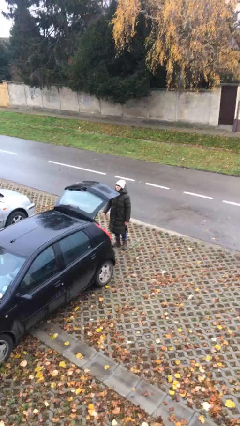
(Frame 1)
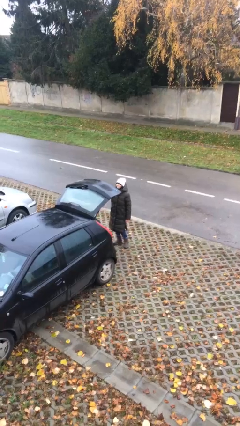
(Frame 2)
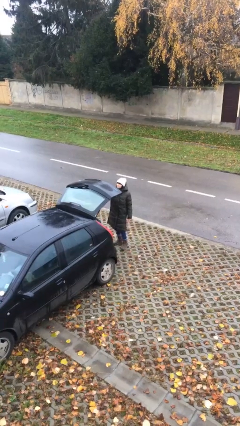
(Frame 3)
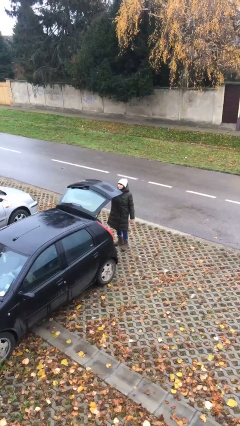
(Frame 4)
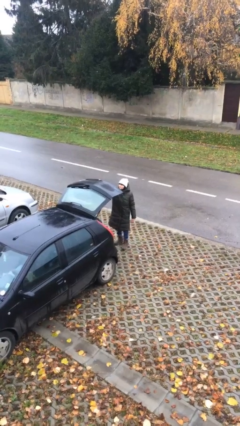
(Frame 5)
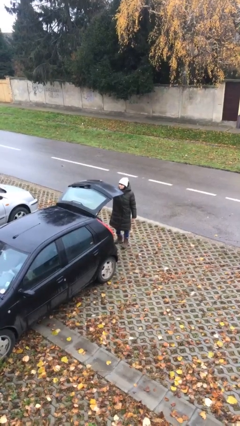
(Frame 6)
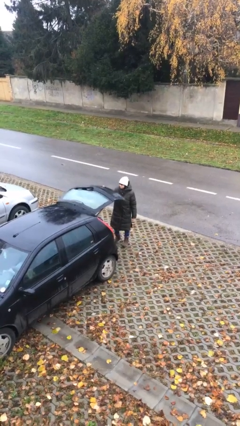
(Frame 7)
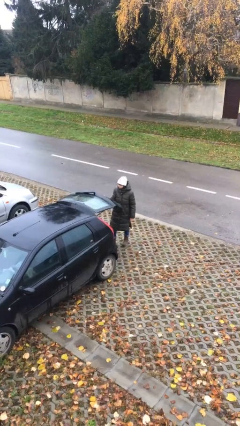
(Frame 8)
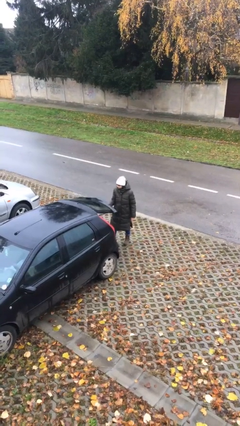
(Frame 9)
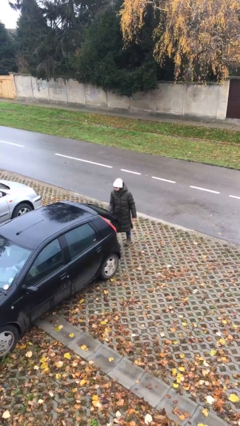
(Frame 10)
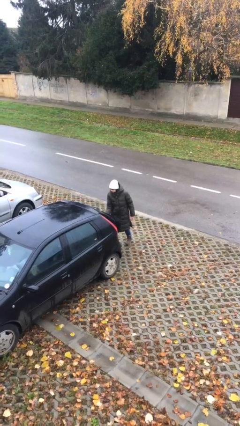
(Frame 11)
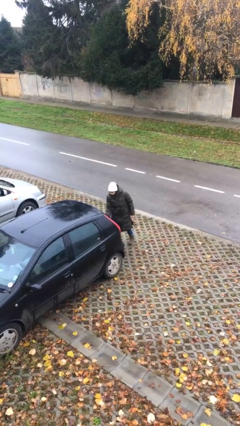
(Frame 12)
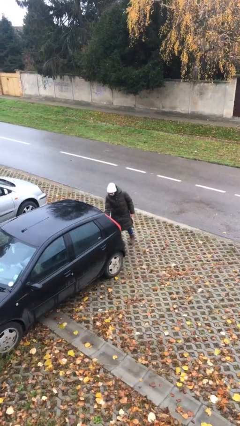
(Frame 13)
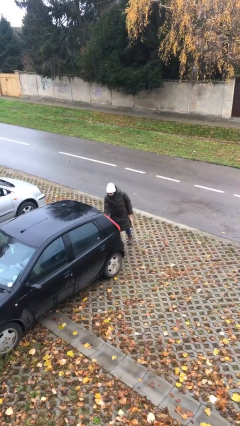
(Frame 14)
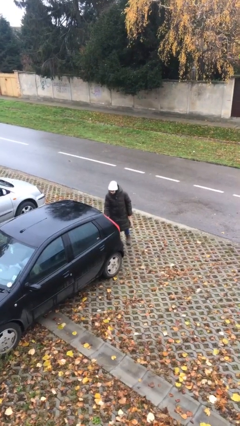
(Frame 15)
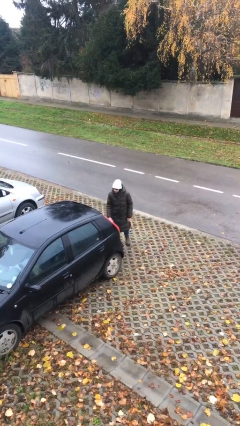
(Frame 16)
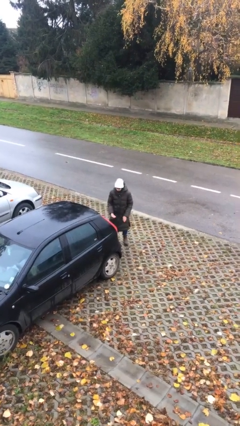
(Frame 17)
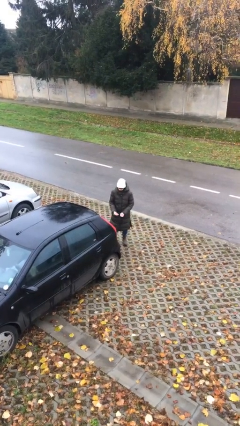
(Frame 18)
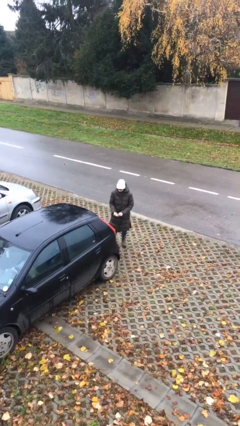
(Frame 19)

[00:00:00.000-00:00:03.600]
person closes car trunk

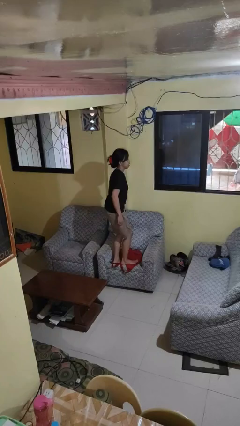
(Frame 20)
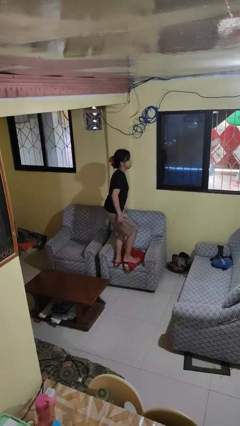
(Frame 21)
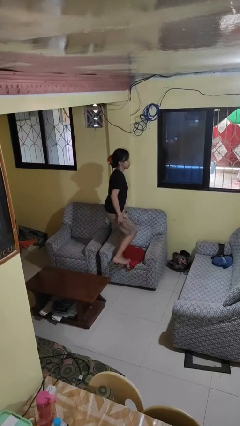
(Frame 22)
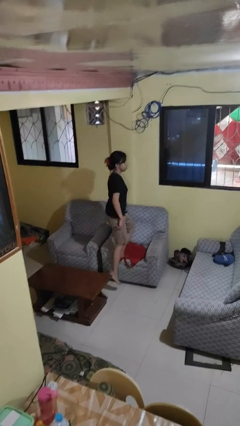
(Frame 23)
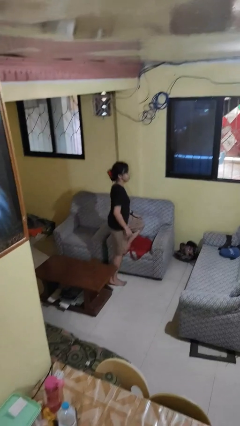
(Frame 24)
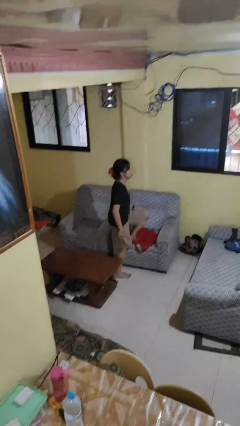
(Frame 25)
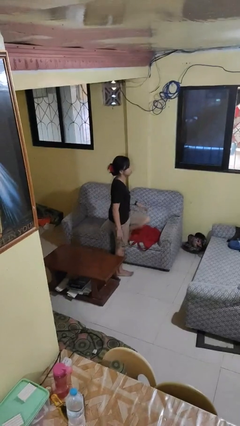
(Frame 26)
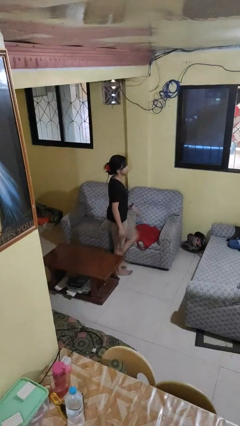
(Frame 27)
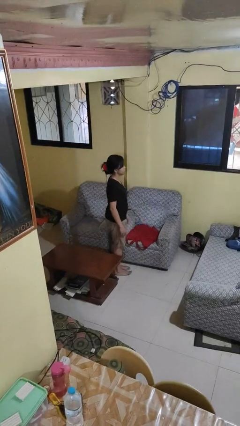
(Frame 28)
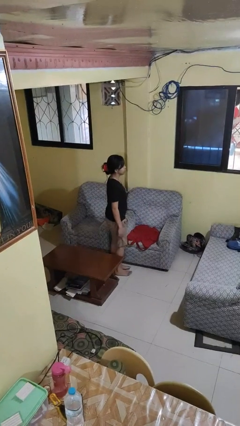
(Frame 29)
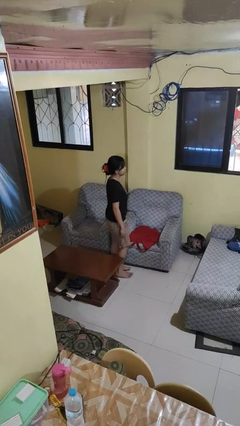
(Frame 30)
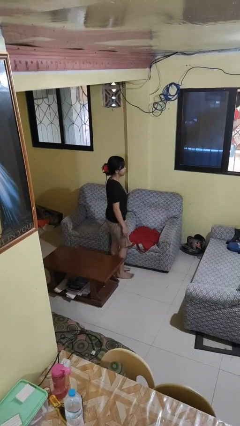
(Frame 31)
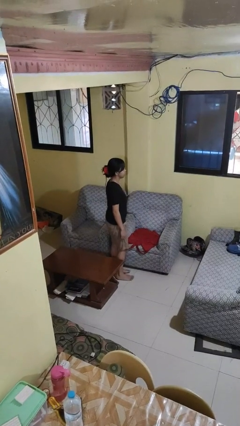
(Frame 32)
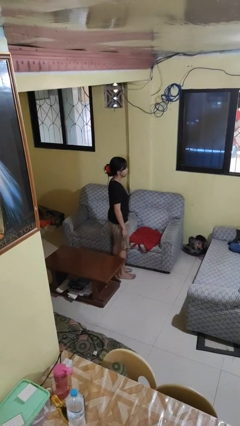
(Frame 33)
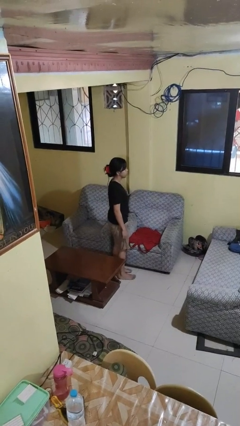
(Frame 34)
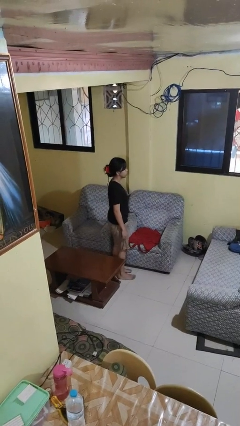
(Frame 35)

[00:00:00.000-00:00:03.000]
person climbs off couch

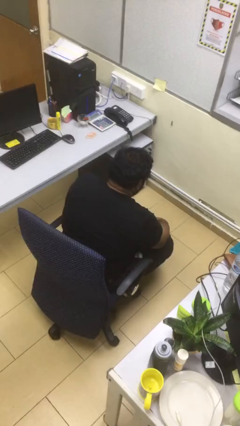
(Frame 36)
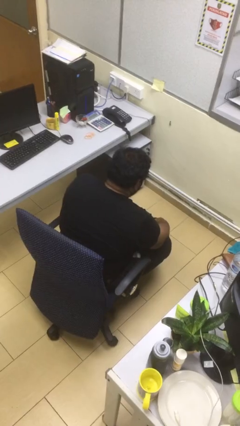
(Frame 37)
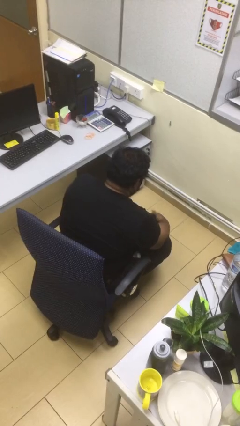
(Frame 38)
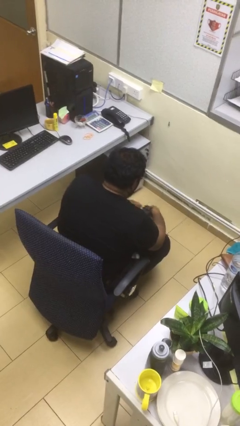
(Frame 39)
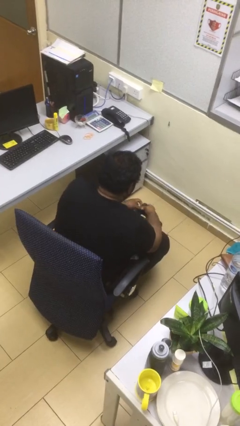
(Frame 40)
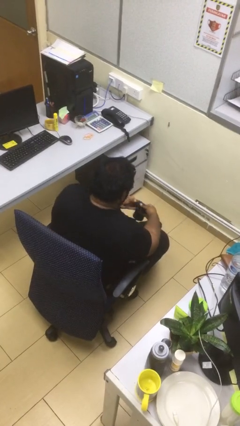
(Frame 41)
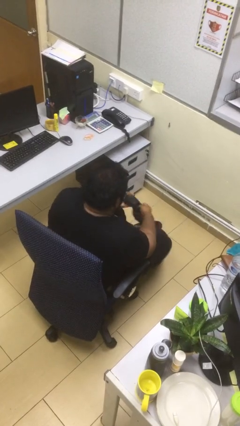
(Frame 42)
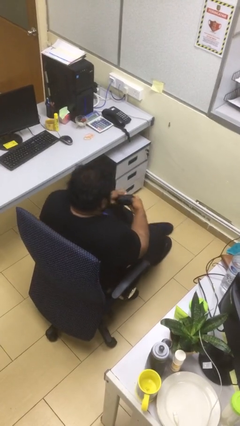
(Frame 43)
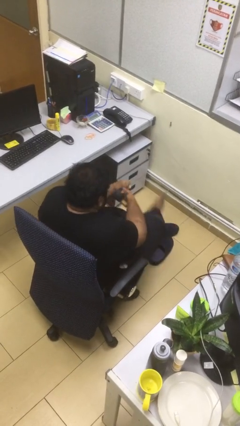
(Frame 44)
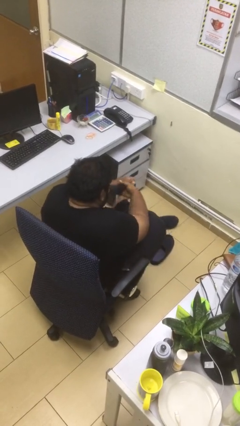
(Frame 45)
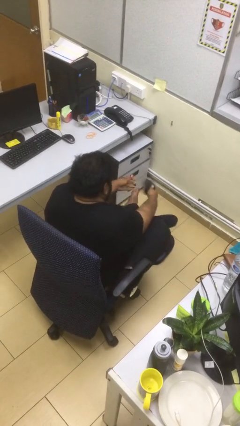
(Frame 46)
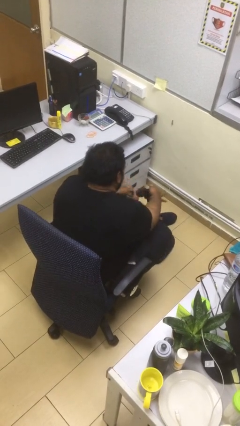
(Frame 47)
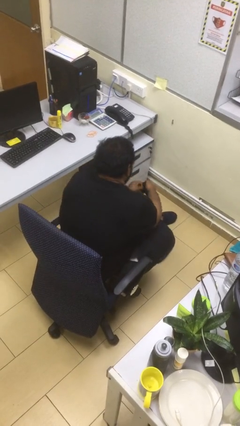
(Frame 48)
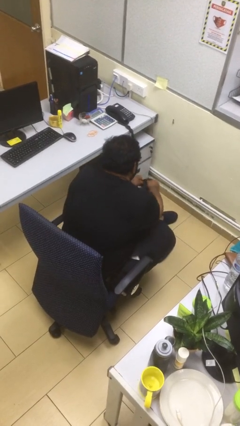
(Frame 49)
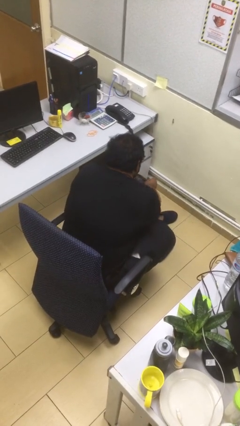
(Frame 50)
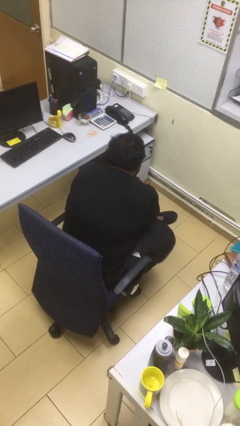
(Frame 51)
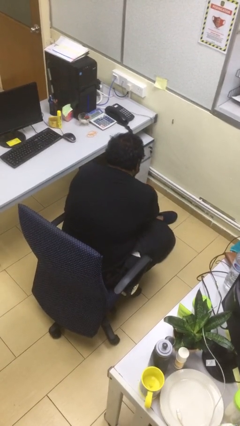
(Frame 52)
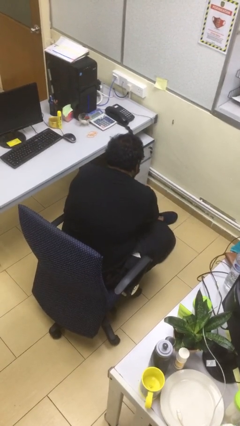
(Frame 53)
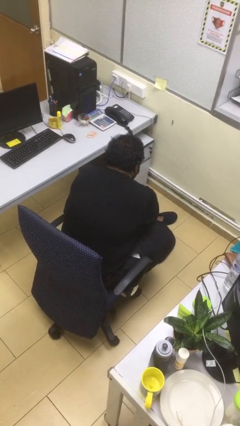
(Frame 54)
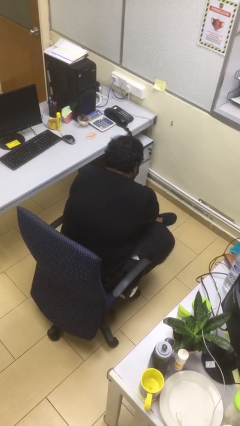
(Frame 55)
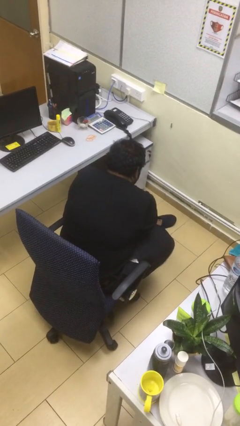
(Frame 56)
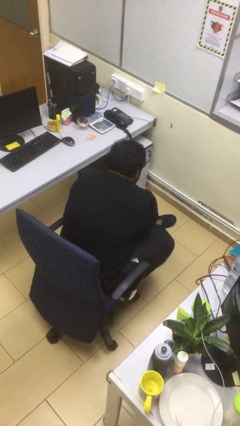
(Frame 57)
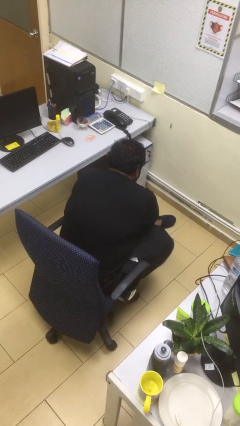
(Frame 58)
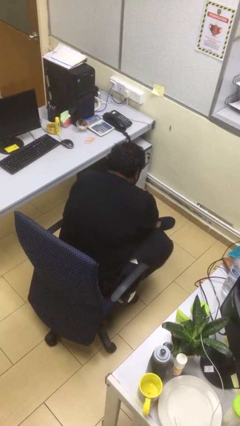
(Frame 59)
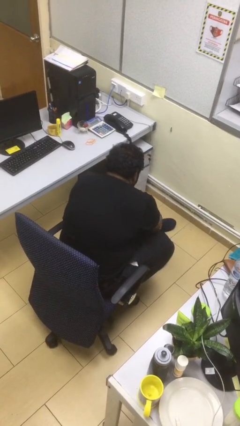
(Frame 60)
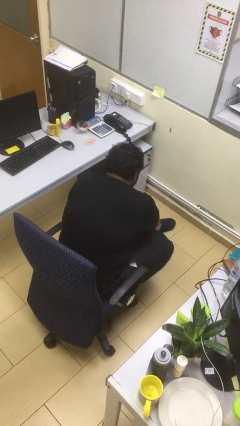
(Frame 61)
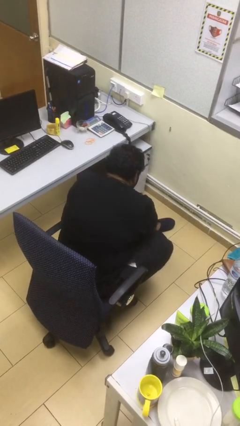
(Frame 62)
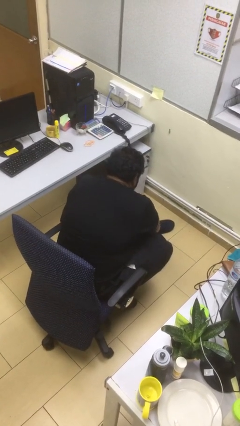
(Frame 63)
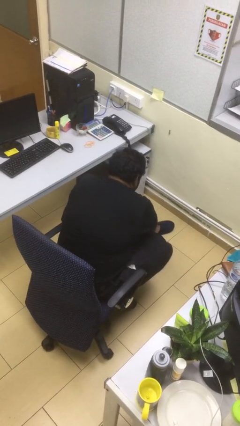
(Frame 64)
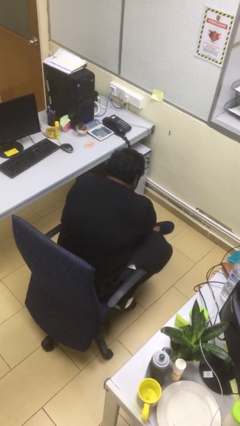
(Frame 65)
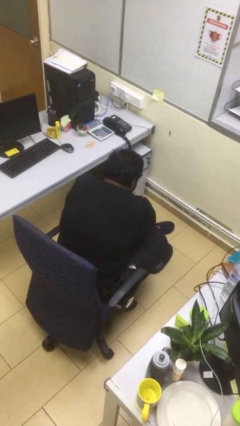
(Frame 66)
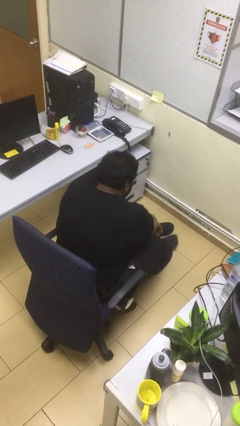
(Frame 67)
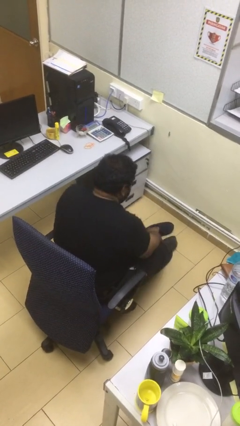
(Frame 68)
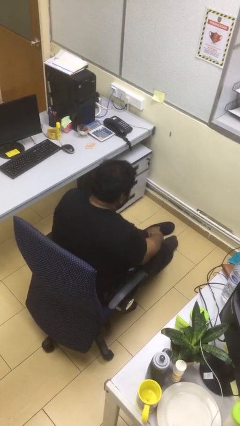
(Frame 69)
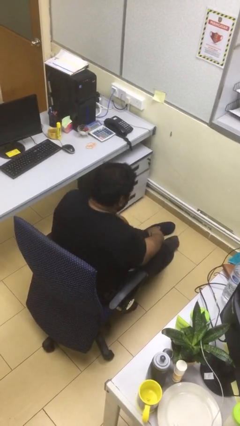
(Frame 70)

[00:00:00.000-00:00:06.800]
person puts on socks

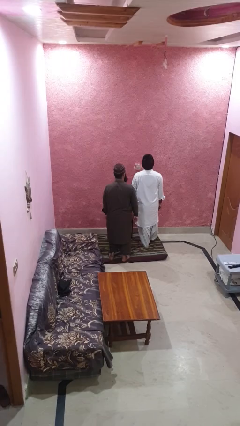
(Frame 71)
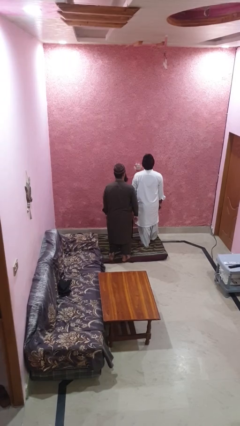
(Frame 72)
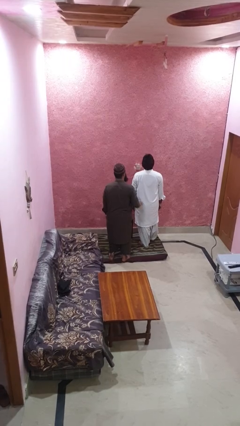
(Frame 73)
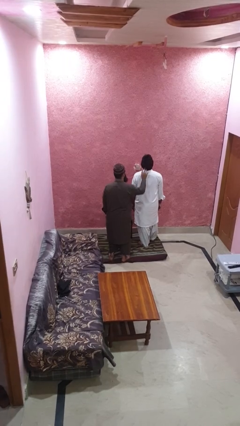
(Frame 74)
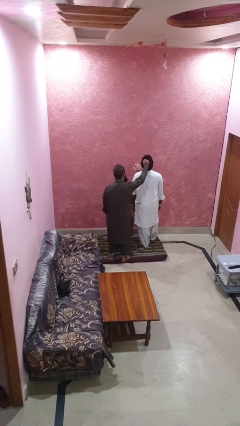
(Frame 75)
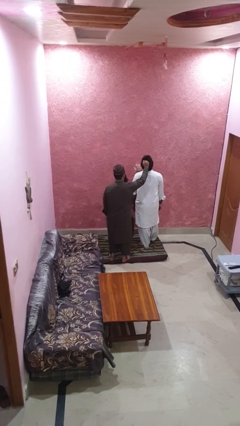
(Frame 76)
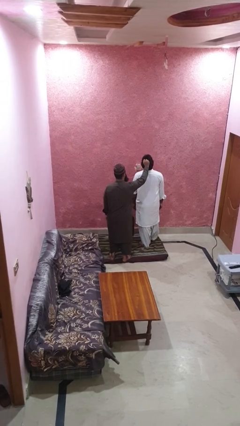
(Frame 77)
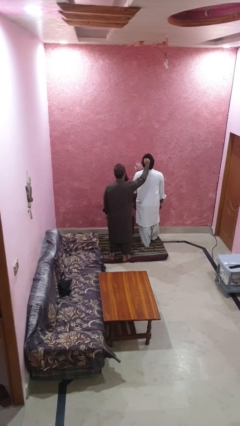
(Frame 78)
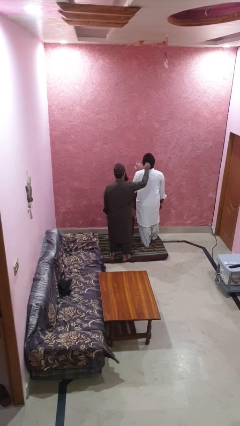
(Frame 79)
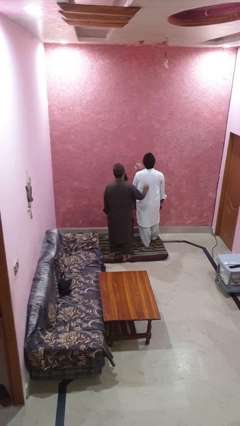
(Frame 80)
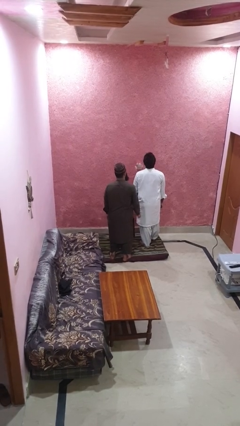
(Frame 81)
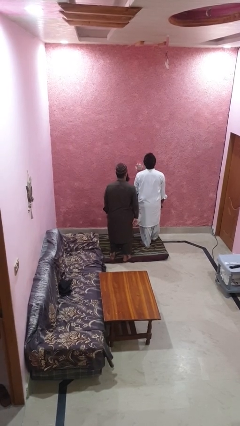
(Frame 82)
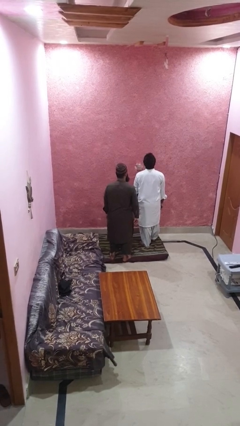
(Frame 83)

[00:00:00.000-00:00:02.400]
person grabs person by hair

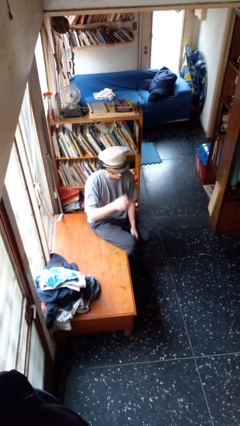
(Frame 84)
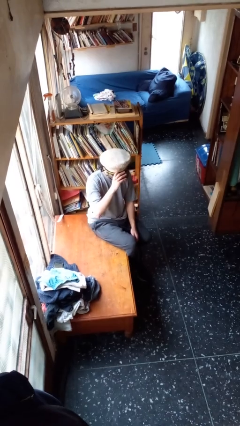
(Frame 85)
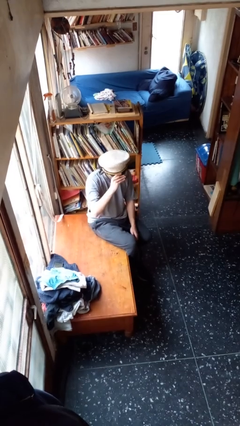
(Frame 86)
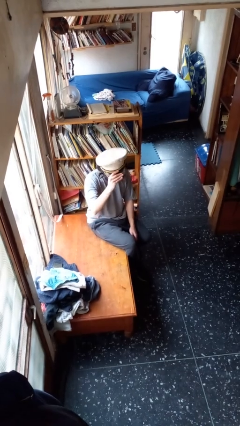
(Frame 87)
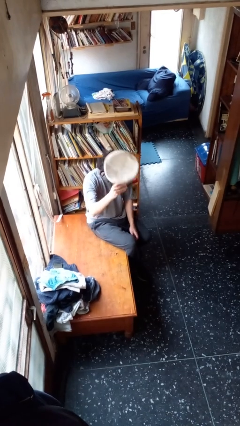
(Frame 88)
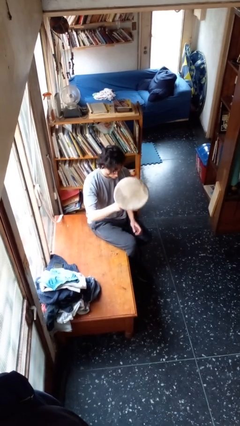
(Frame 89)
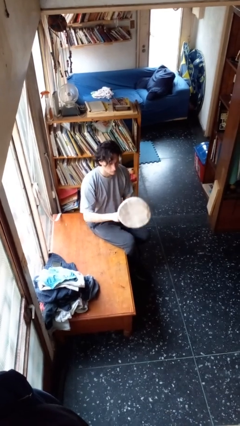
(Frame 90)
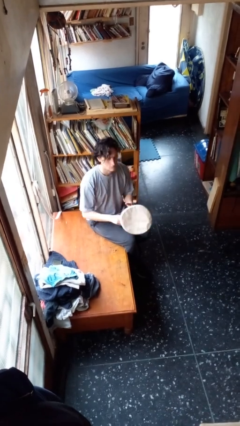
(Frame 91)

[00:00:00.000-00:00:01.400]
person takes off hat

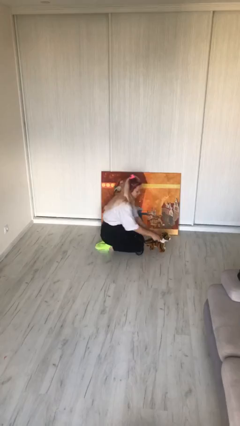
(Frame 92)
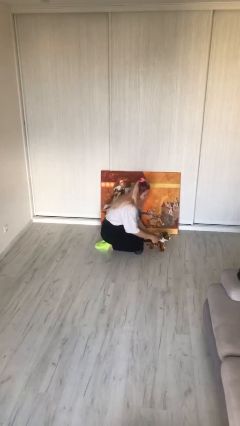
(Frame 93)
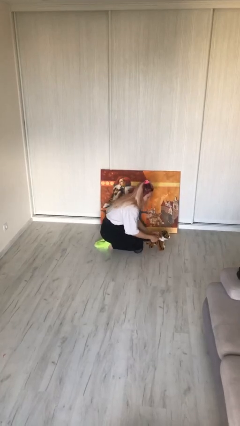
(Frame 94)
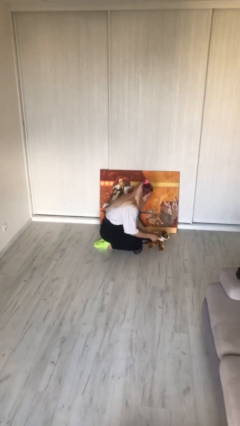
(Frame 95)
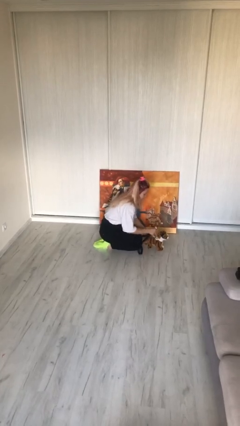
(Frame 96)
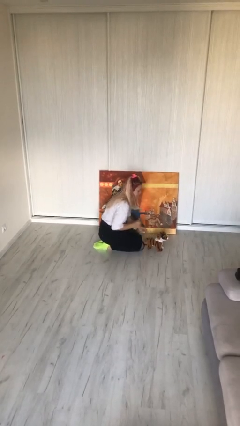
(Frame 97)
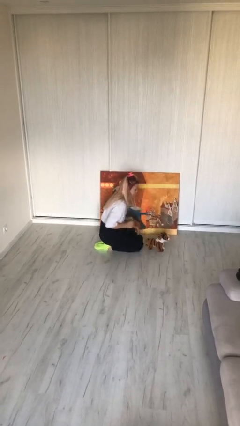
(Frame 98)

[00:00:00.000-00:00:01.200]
person unattaches leash from dog
